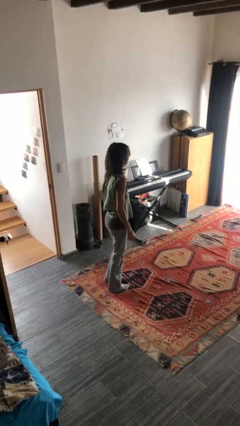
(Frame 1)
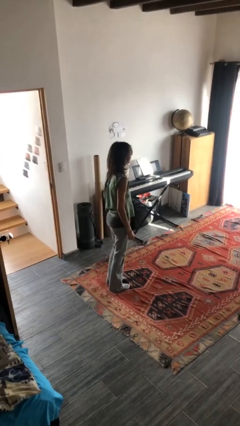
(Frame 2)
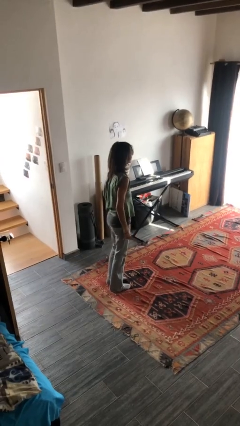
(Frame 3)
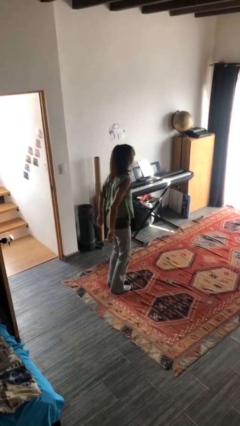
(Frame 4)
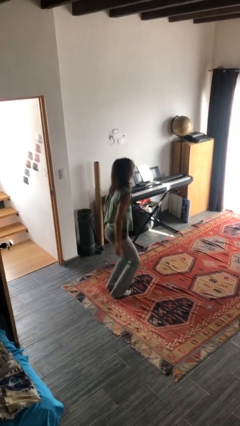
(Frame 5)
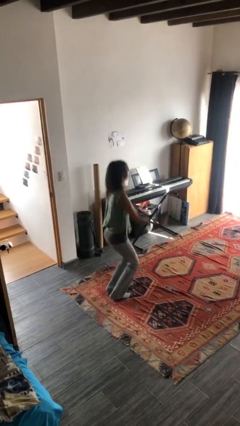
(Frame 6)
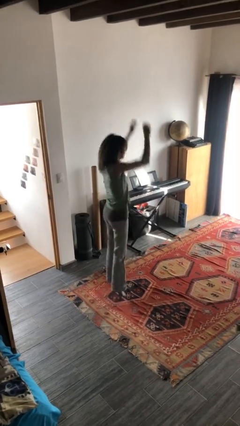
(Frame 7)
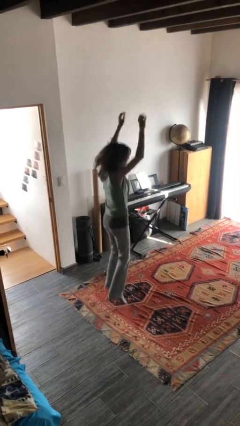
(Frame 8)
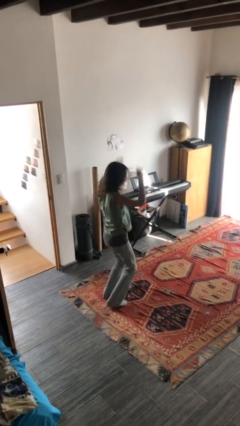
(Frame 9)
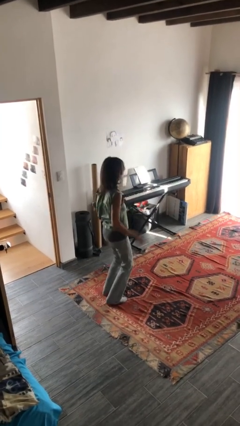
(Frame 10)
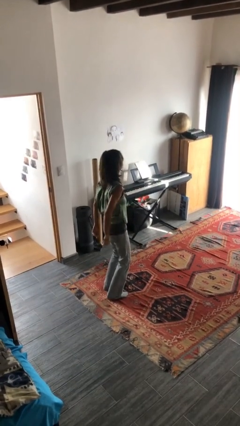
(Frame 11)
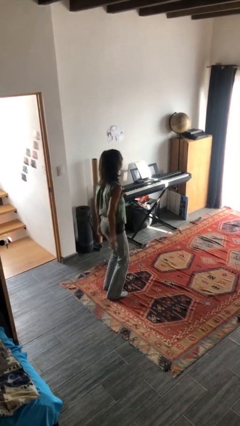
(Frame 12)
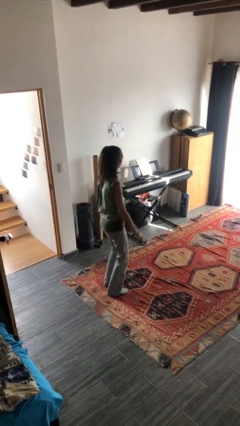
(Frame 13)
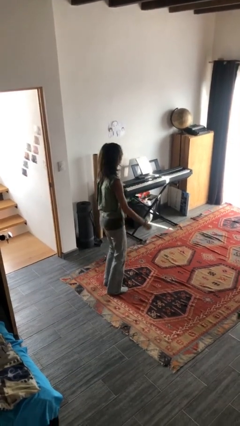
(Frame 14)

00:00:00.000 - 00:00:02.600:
person jumps

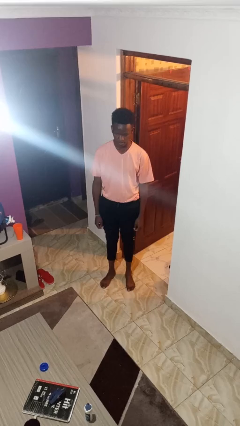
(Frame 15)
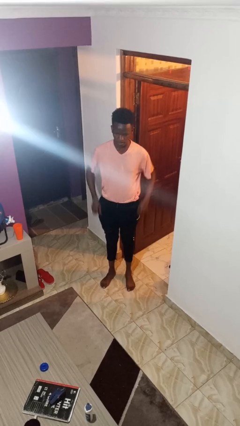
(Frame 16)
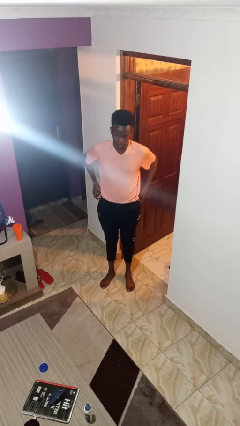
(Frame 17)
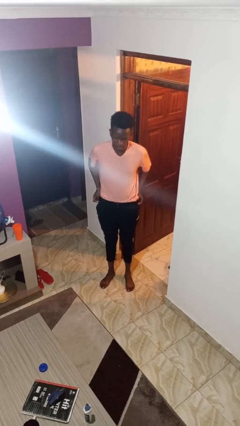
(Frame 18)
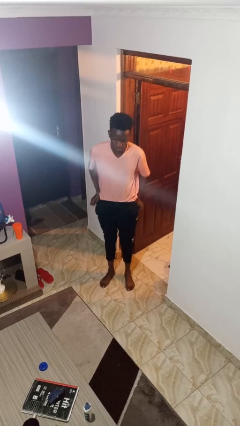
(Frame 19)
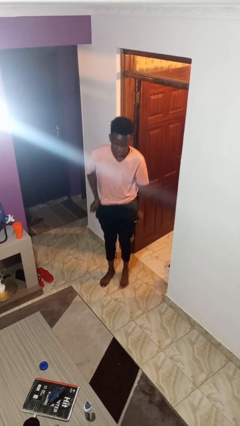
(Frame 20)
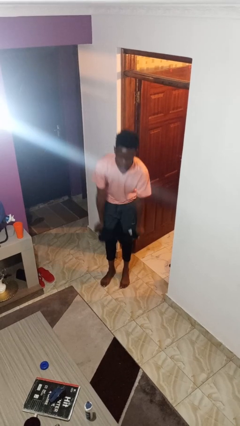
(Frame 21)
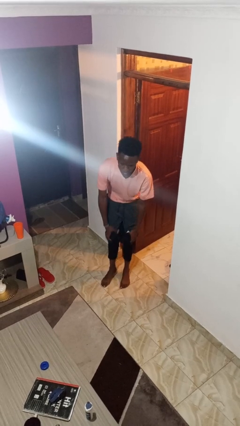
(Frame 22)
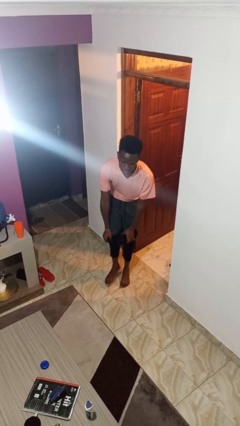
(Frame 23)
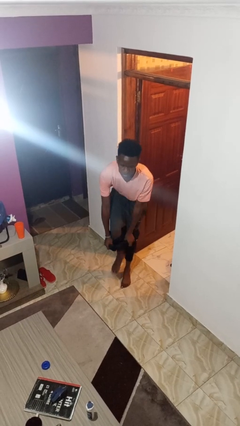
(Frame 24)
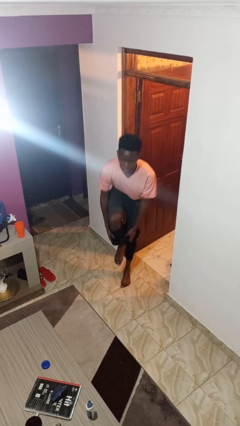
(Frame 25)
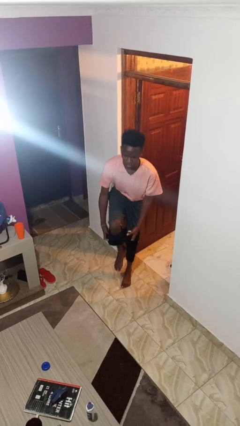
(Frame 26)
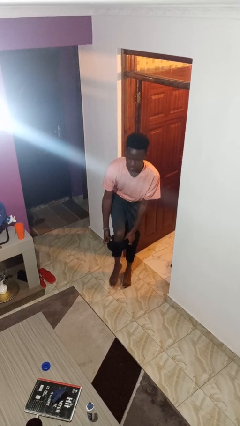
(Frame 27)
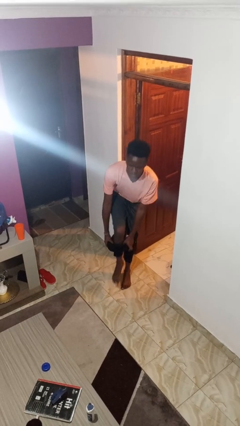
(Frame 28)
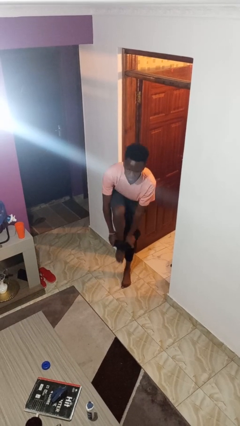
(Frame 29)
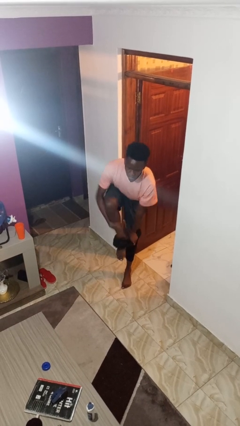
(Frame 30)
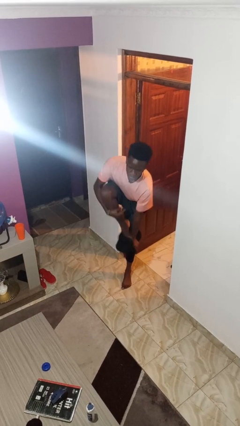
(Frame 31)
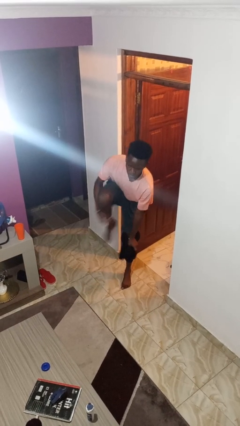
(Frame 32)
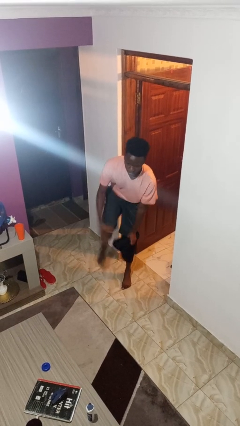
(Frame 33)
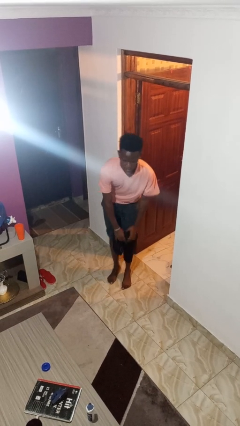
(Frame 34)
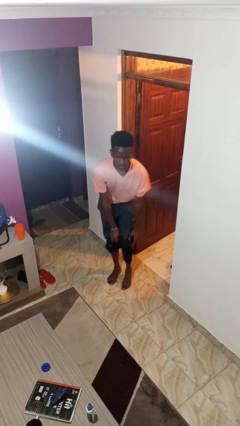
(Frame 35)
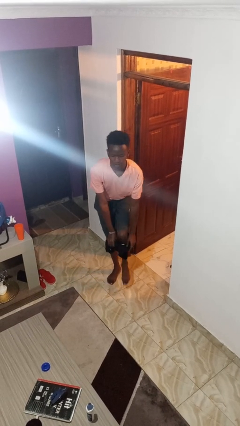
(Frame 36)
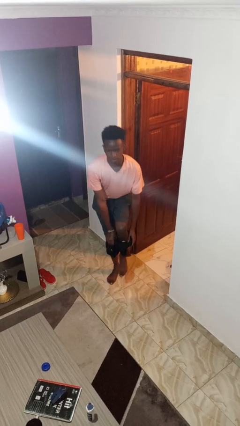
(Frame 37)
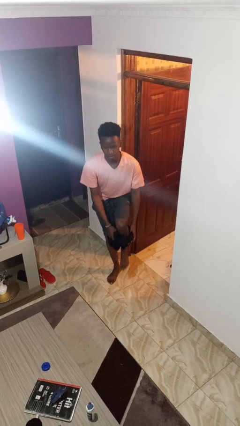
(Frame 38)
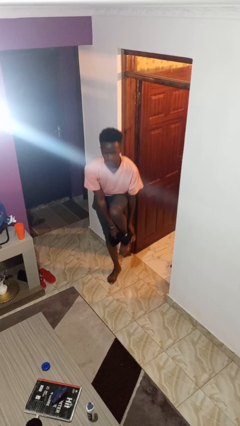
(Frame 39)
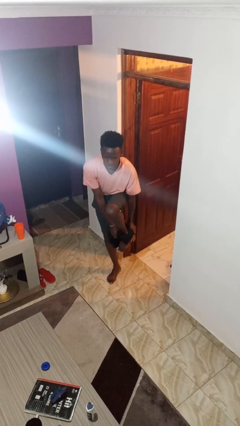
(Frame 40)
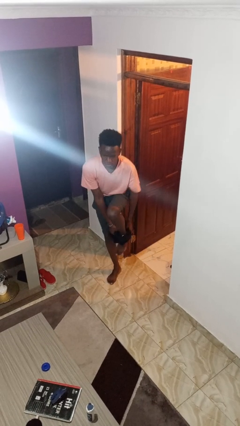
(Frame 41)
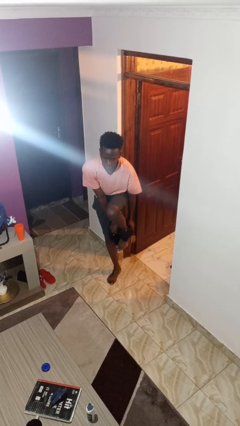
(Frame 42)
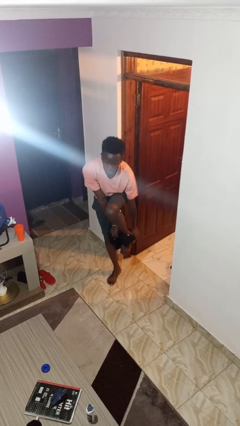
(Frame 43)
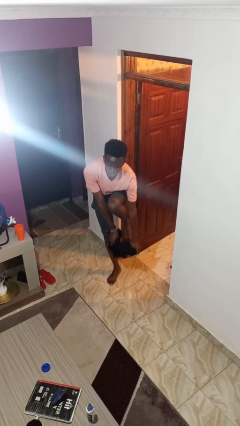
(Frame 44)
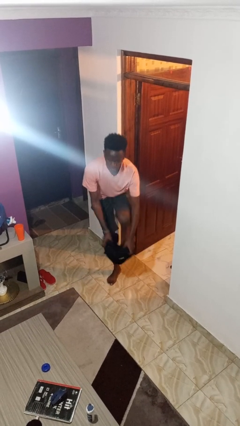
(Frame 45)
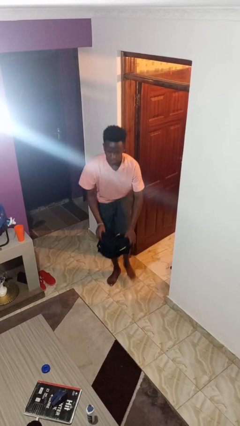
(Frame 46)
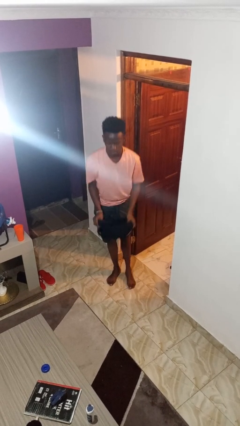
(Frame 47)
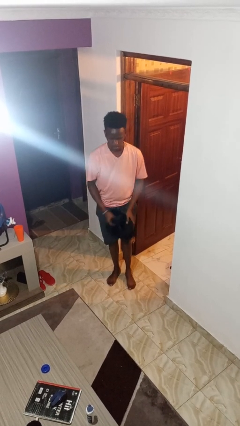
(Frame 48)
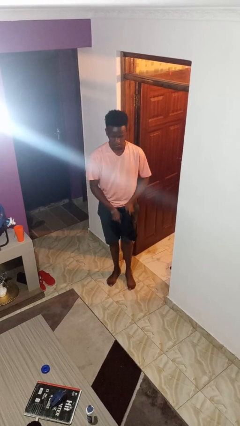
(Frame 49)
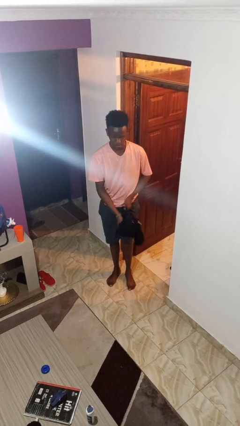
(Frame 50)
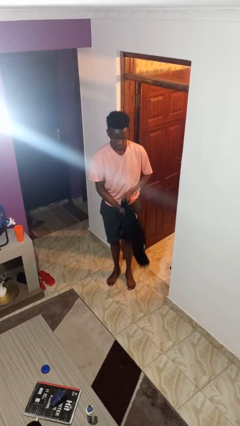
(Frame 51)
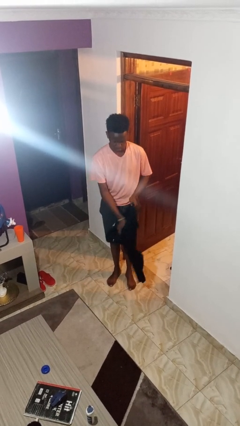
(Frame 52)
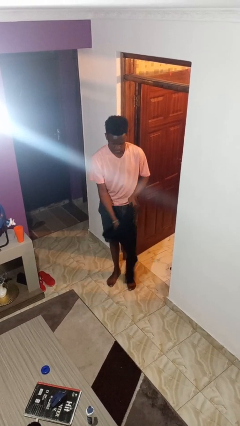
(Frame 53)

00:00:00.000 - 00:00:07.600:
person takes off pants

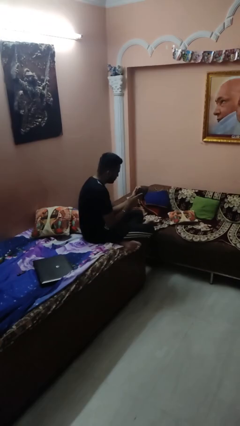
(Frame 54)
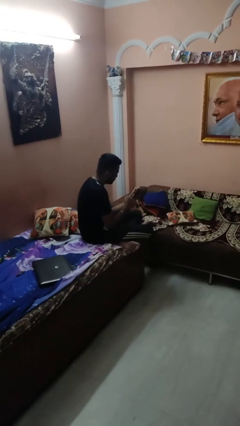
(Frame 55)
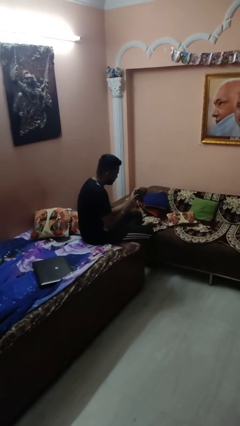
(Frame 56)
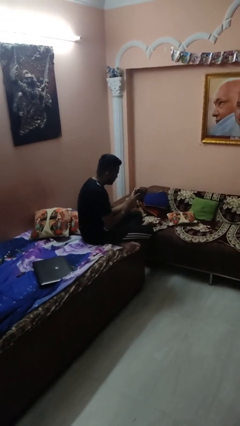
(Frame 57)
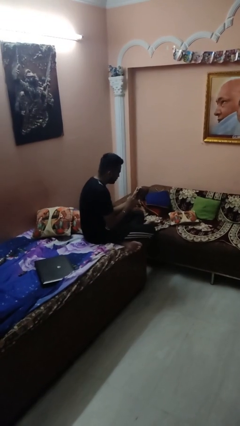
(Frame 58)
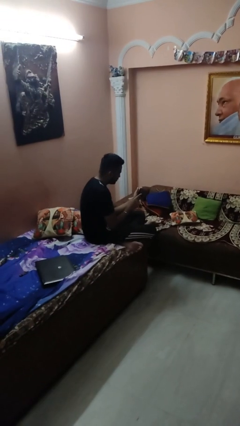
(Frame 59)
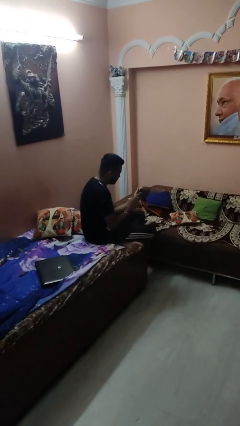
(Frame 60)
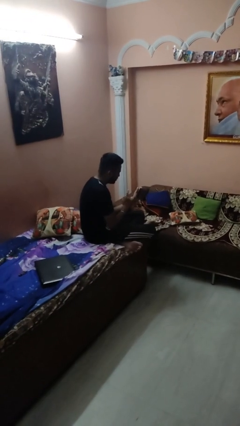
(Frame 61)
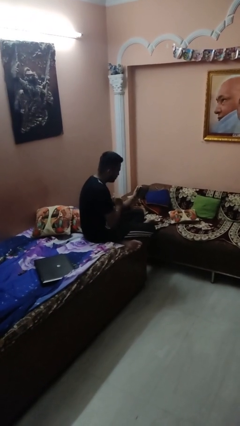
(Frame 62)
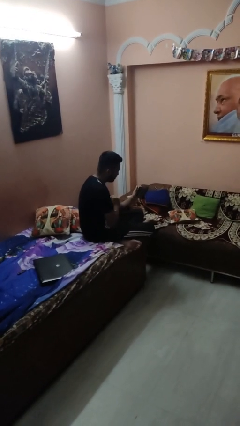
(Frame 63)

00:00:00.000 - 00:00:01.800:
person interacts with tablet

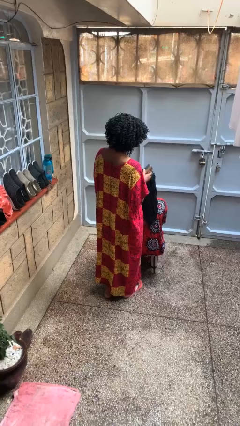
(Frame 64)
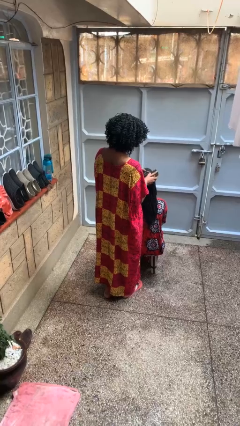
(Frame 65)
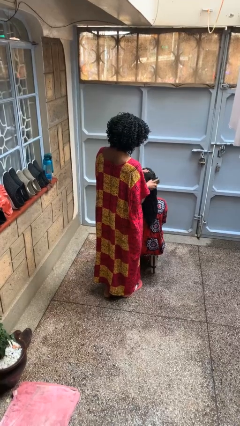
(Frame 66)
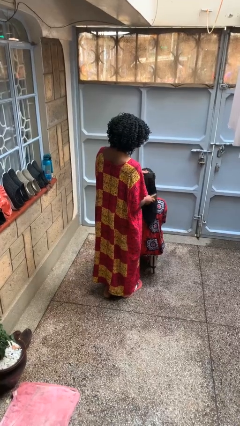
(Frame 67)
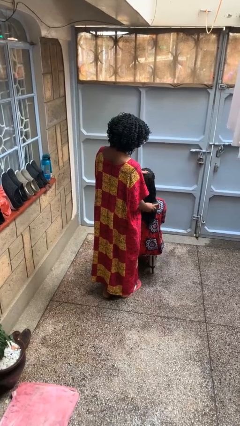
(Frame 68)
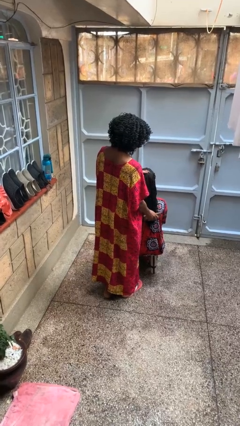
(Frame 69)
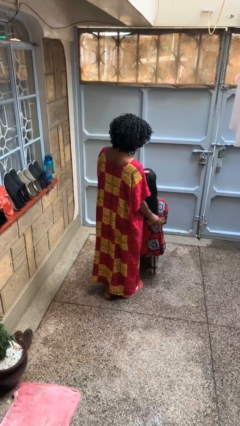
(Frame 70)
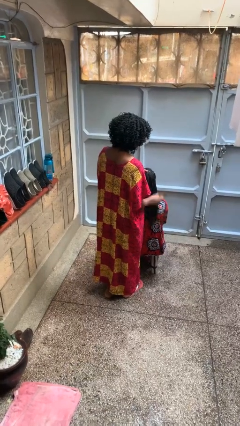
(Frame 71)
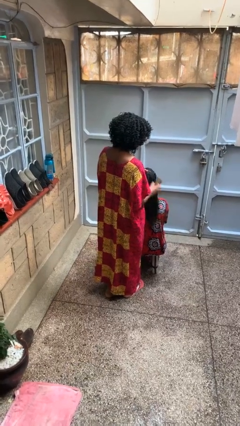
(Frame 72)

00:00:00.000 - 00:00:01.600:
person brushes hair of person

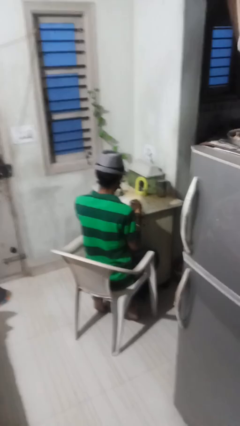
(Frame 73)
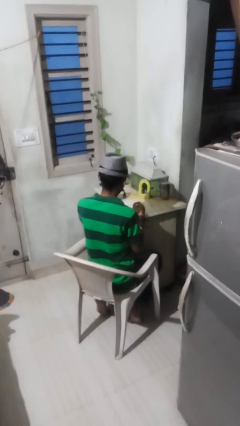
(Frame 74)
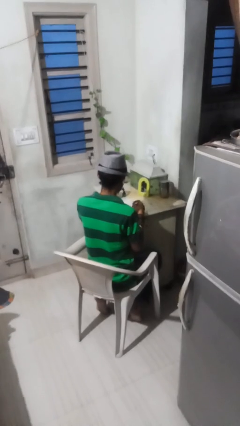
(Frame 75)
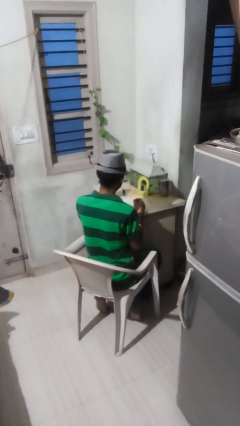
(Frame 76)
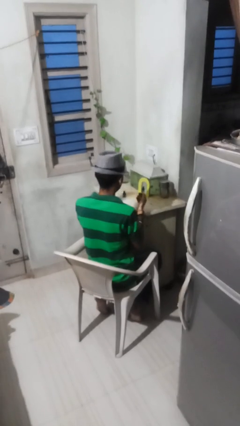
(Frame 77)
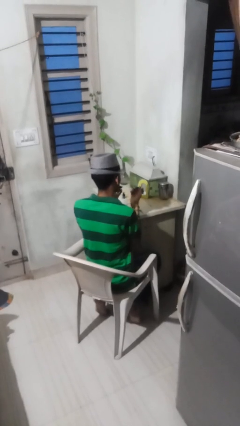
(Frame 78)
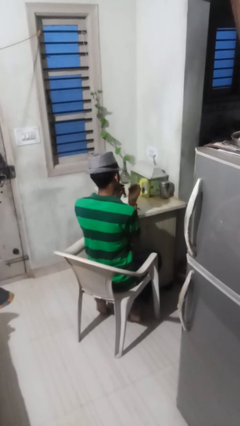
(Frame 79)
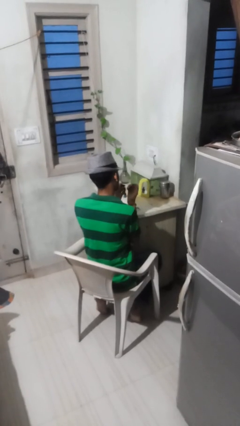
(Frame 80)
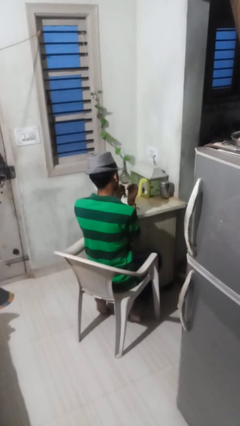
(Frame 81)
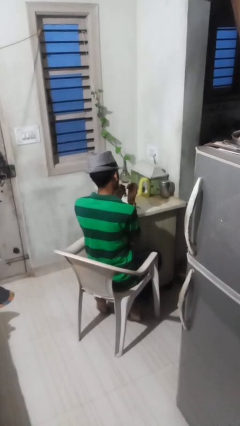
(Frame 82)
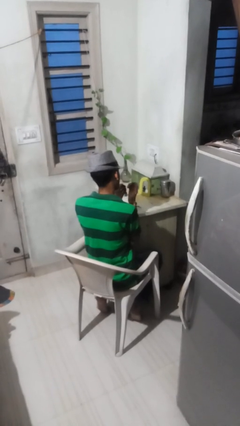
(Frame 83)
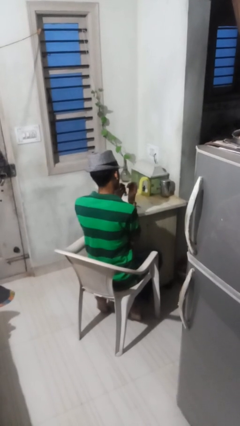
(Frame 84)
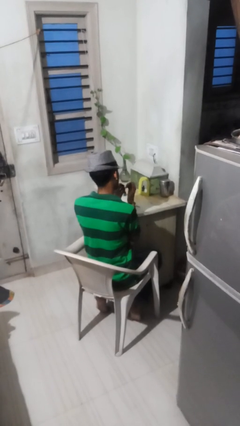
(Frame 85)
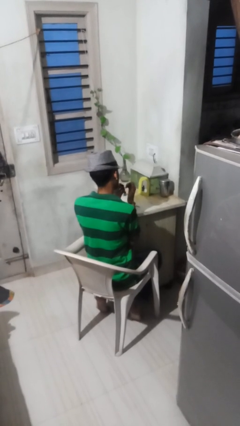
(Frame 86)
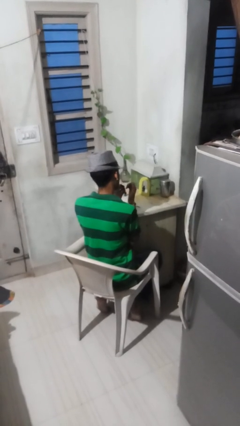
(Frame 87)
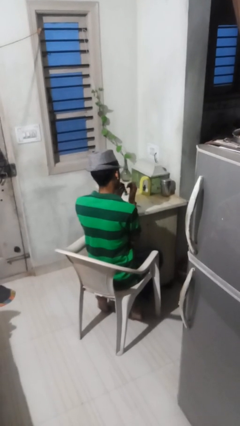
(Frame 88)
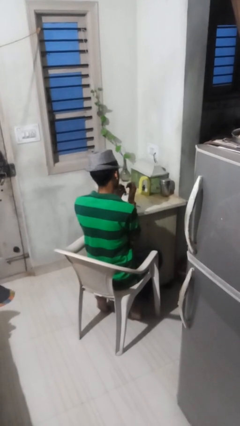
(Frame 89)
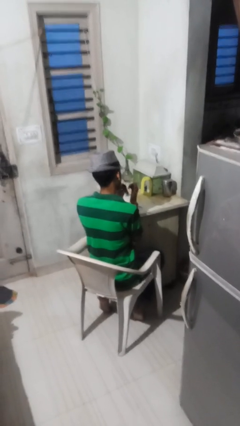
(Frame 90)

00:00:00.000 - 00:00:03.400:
person paints fingernails

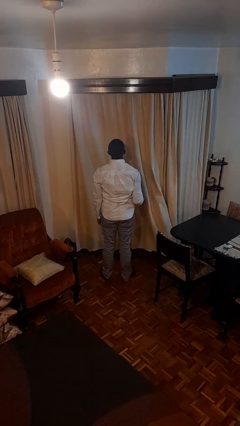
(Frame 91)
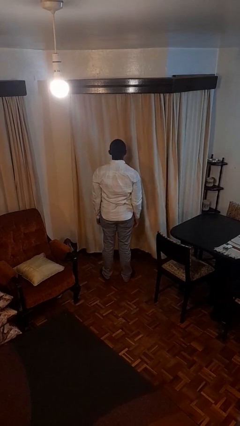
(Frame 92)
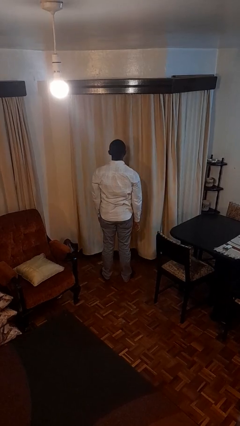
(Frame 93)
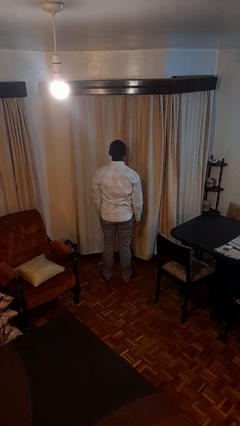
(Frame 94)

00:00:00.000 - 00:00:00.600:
person closes curtains
